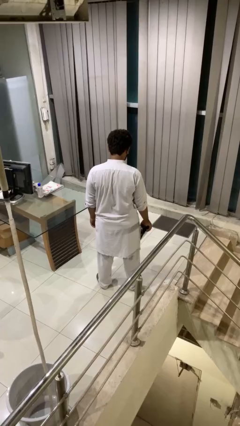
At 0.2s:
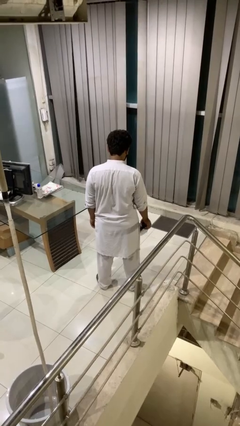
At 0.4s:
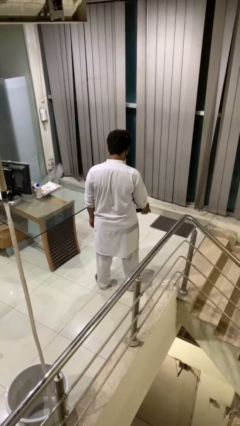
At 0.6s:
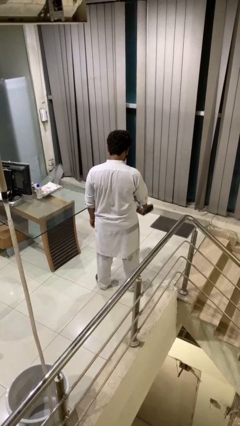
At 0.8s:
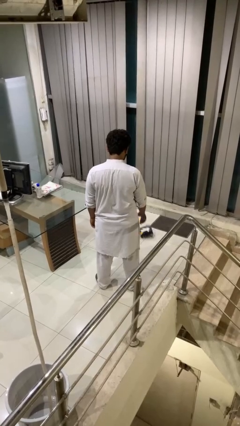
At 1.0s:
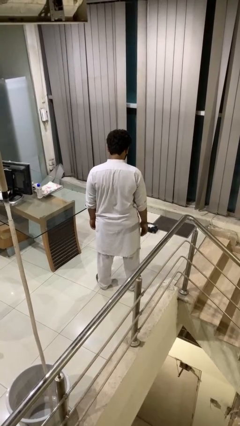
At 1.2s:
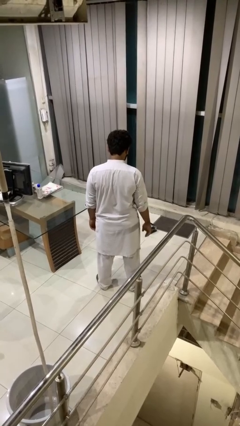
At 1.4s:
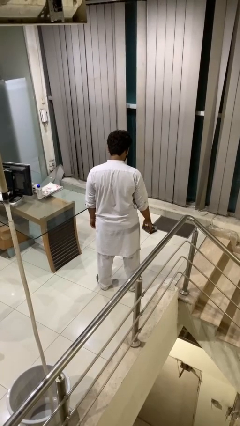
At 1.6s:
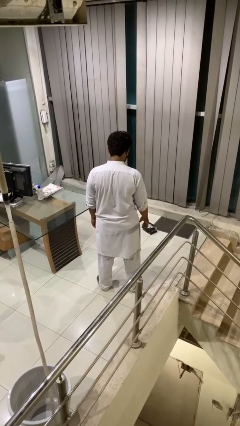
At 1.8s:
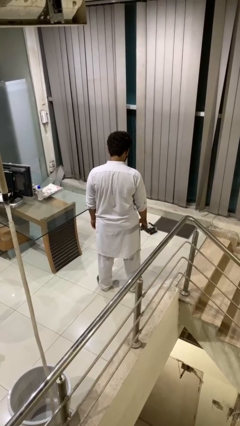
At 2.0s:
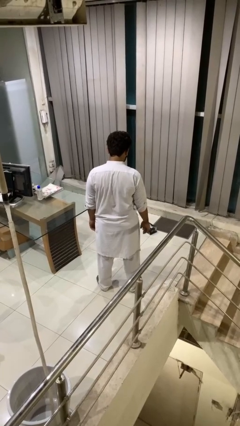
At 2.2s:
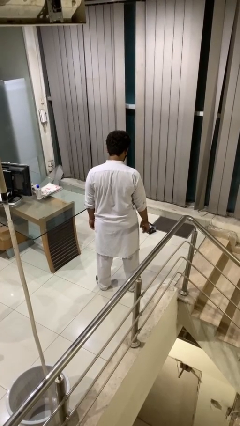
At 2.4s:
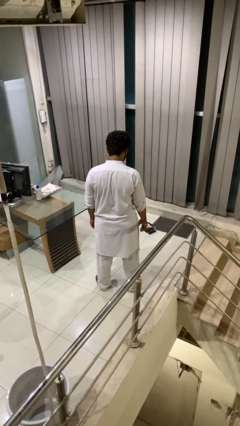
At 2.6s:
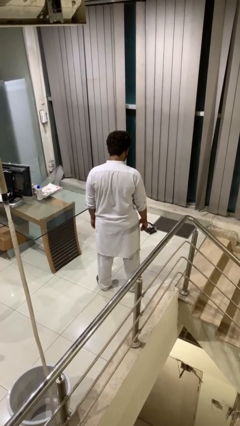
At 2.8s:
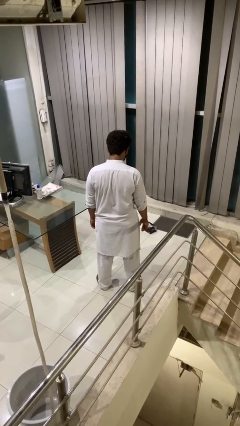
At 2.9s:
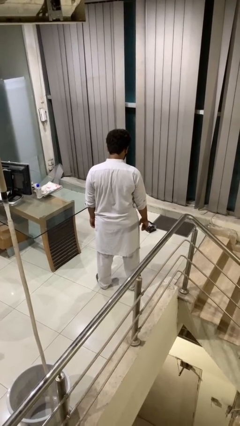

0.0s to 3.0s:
person throws object to ground

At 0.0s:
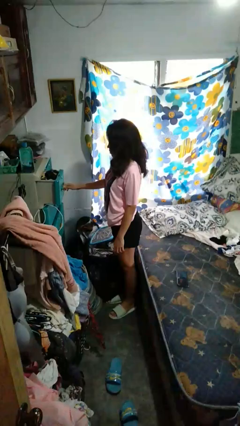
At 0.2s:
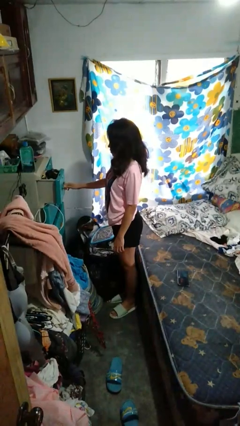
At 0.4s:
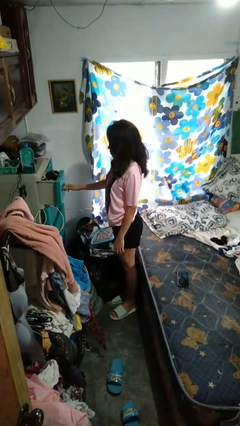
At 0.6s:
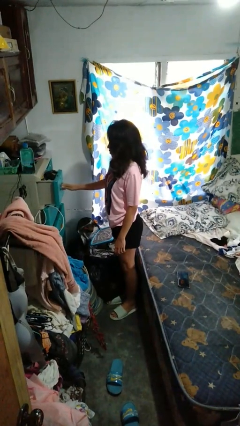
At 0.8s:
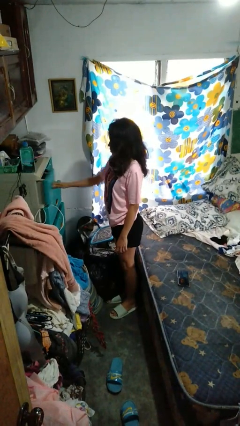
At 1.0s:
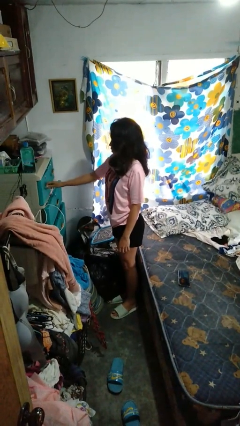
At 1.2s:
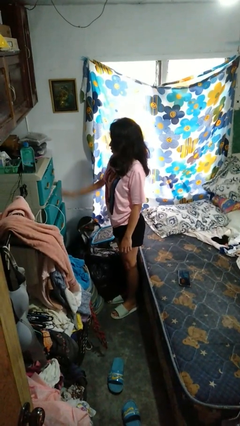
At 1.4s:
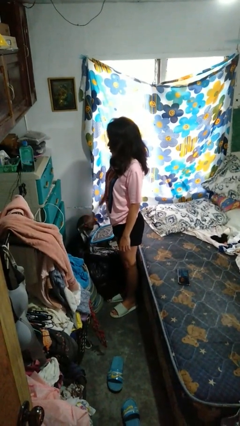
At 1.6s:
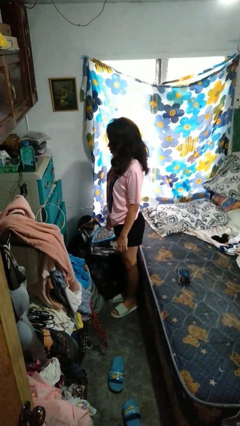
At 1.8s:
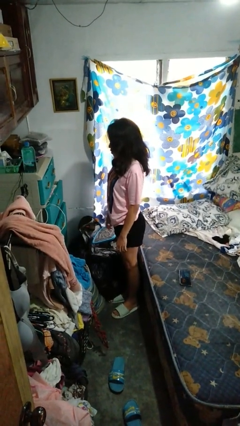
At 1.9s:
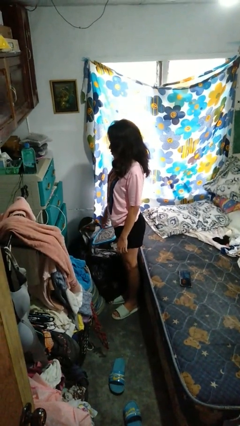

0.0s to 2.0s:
person closes dresser drawer

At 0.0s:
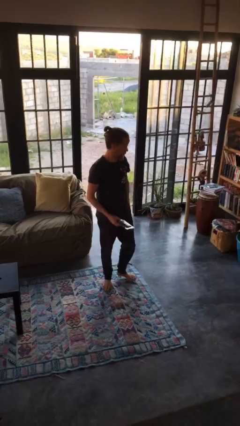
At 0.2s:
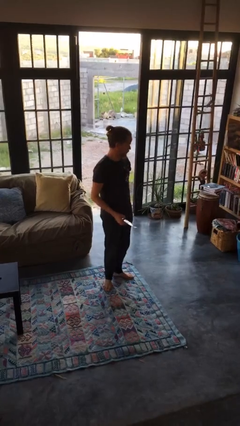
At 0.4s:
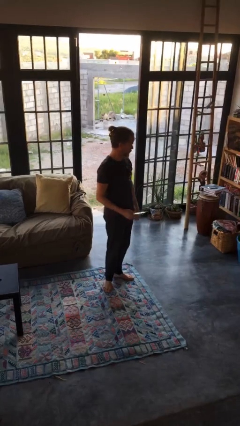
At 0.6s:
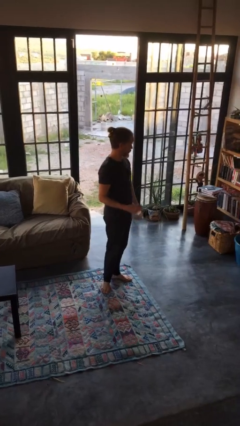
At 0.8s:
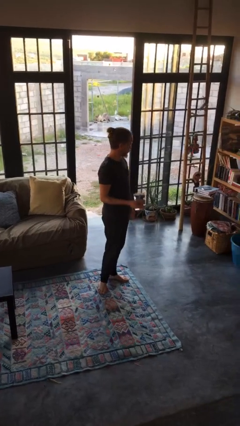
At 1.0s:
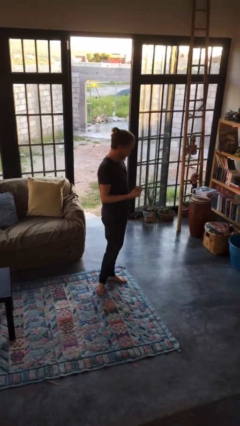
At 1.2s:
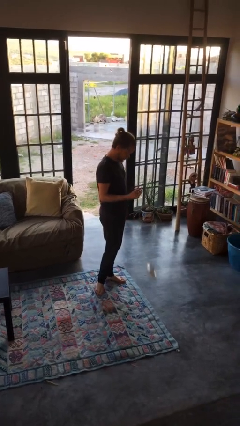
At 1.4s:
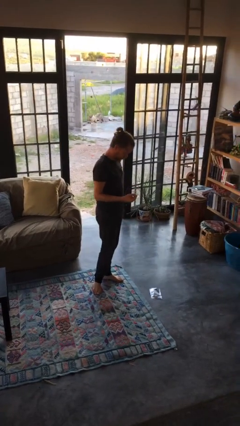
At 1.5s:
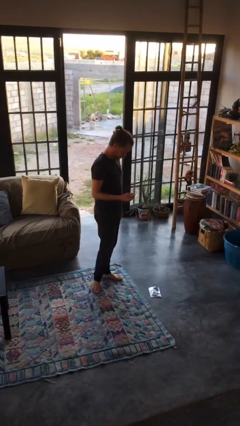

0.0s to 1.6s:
person drops object

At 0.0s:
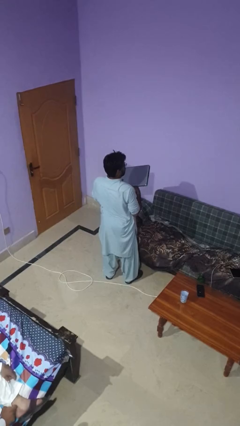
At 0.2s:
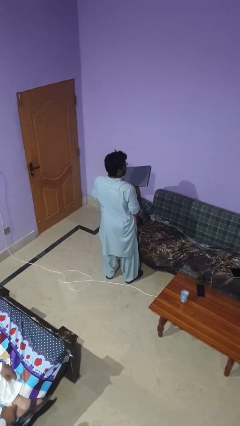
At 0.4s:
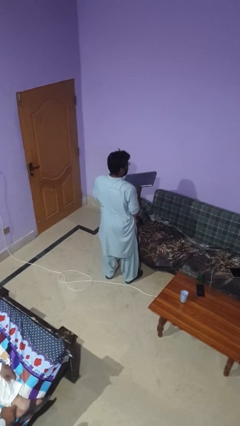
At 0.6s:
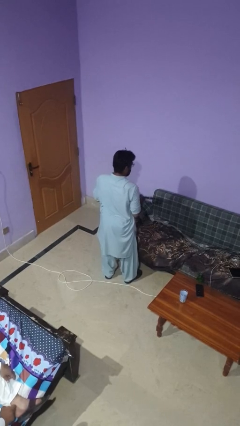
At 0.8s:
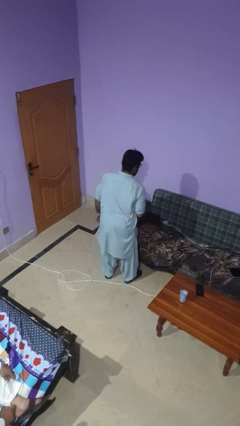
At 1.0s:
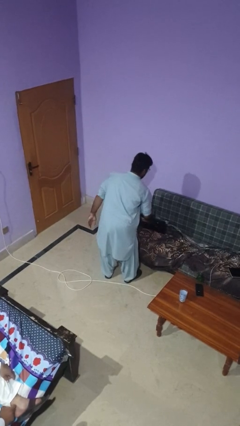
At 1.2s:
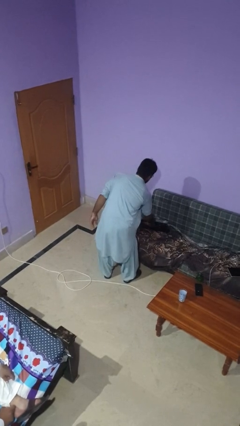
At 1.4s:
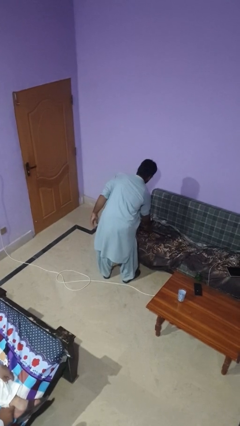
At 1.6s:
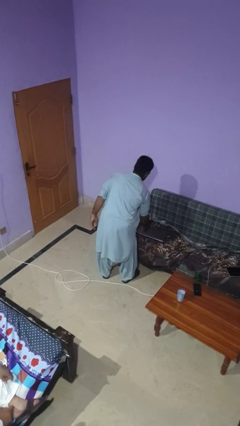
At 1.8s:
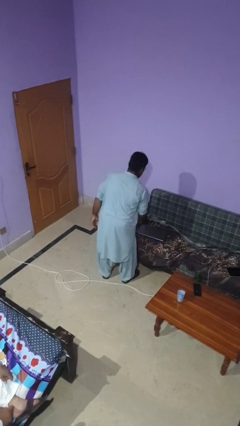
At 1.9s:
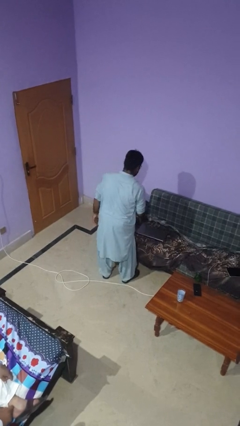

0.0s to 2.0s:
person puts down object on couch

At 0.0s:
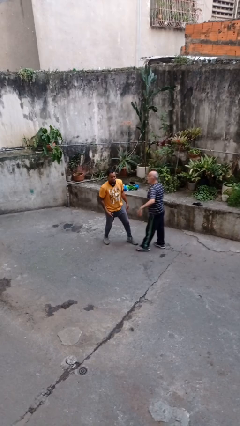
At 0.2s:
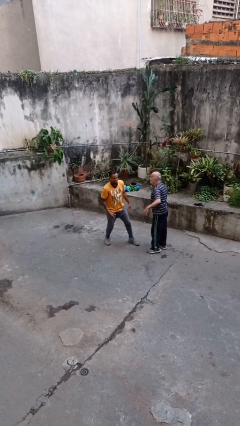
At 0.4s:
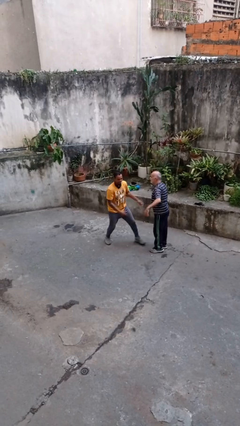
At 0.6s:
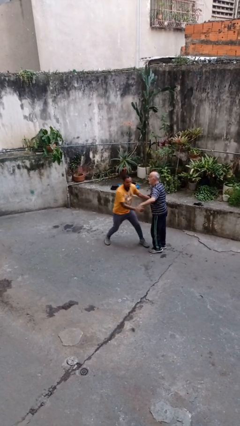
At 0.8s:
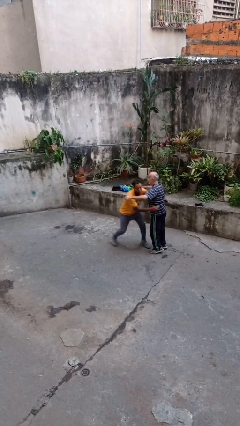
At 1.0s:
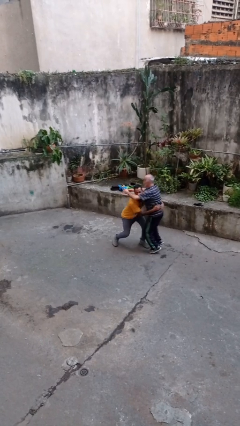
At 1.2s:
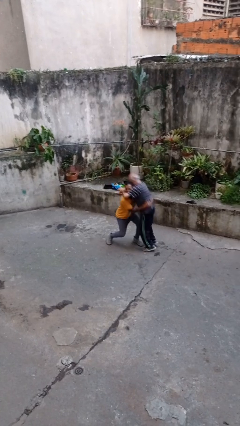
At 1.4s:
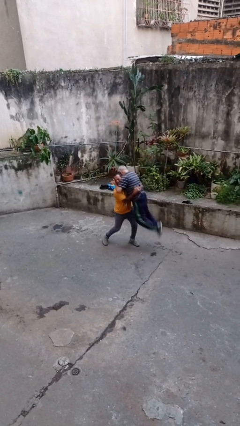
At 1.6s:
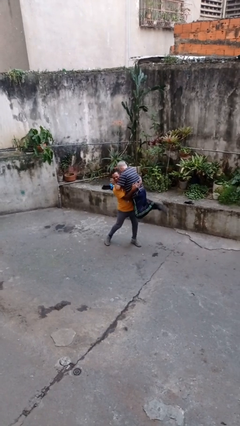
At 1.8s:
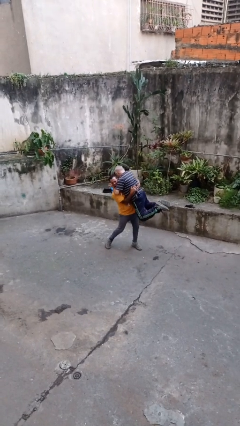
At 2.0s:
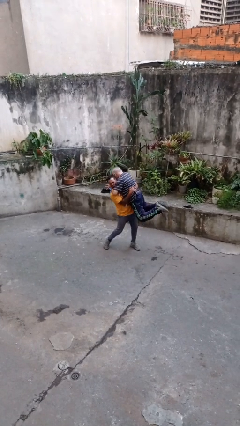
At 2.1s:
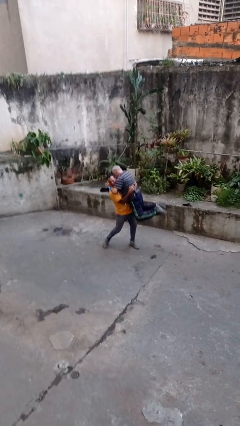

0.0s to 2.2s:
person picks up person

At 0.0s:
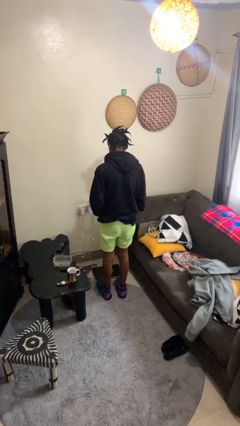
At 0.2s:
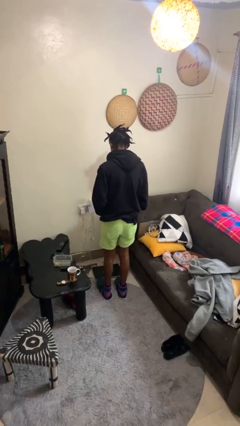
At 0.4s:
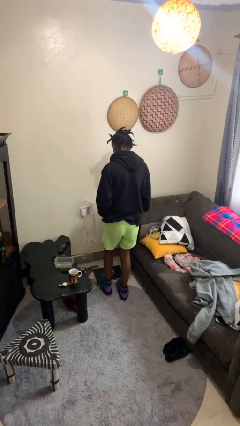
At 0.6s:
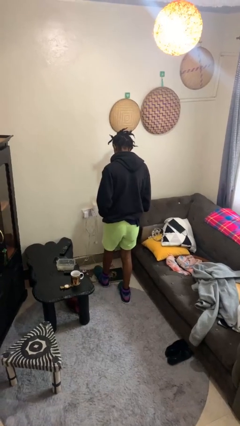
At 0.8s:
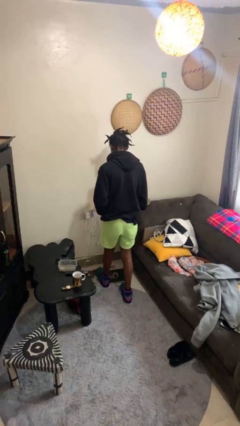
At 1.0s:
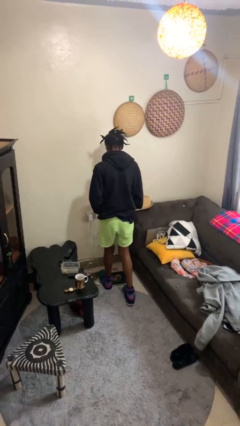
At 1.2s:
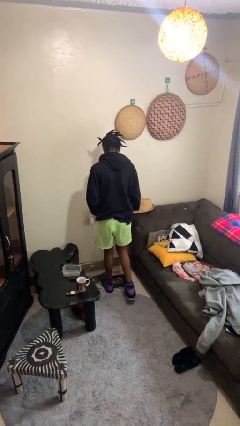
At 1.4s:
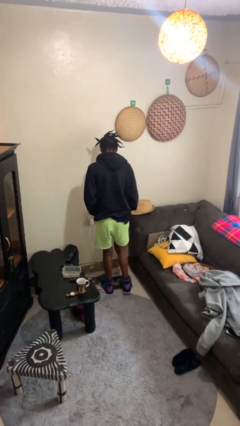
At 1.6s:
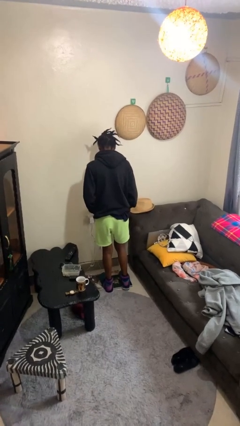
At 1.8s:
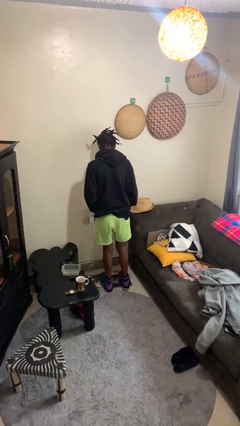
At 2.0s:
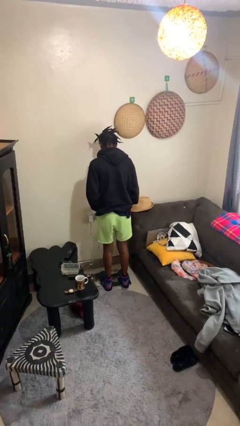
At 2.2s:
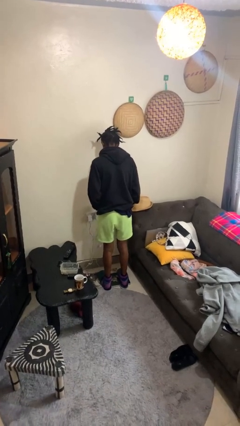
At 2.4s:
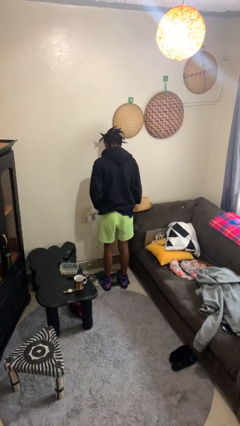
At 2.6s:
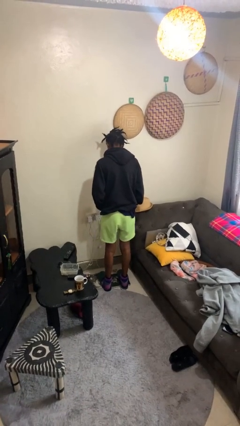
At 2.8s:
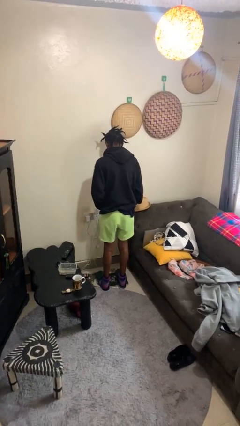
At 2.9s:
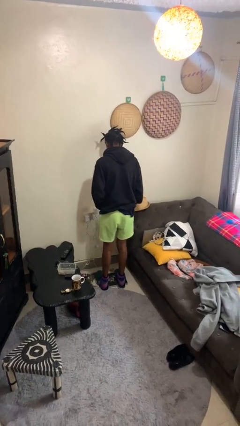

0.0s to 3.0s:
person uses bodyweight scale

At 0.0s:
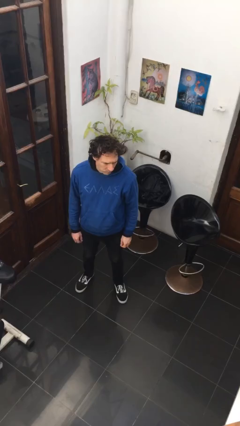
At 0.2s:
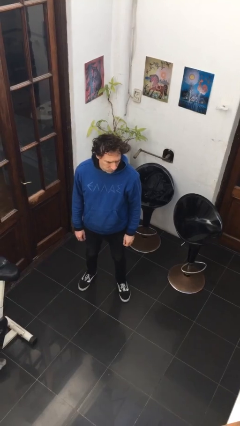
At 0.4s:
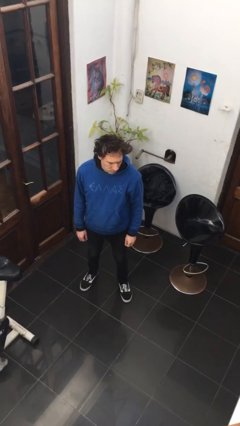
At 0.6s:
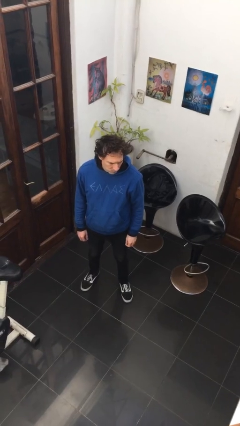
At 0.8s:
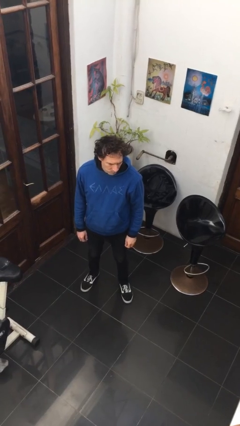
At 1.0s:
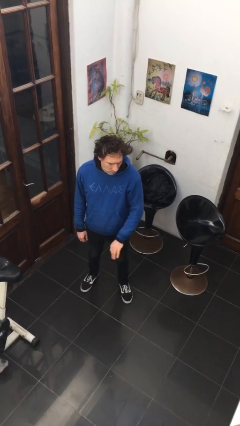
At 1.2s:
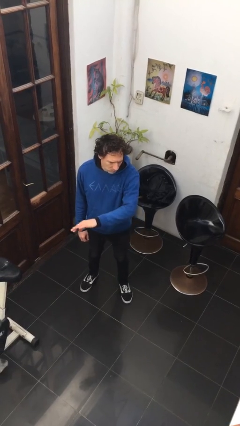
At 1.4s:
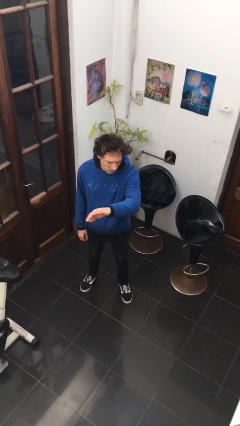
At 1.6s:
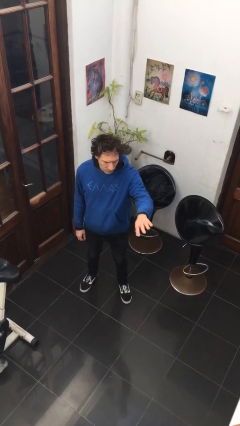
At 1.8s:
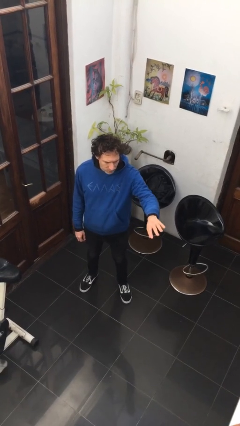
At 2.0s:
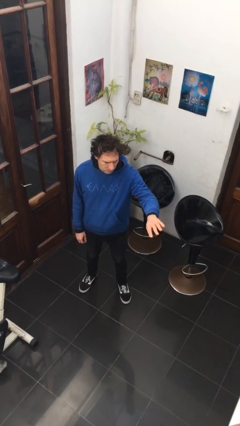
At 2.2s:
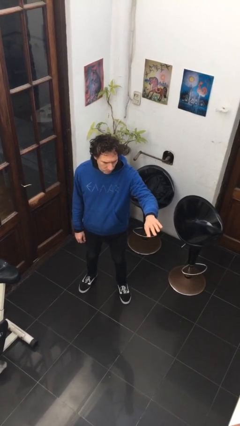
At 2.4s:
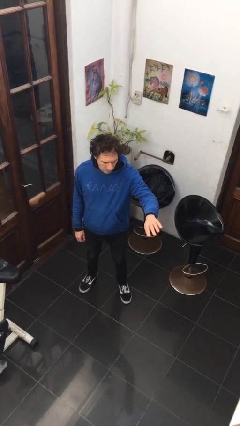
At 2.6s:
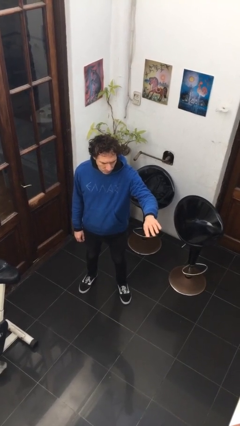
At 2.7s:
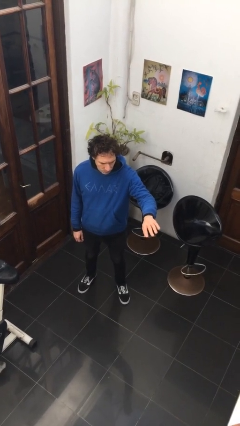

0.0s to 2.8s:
person gestures swipe left

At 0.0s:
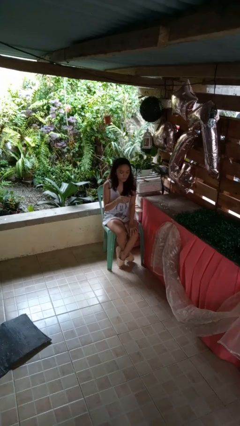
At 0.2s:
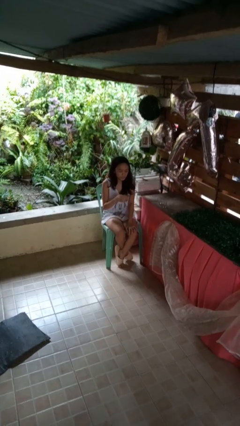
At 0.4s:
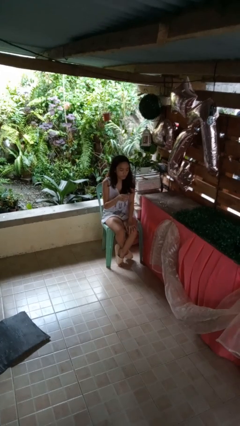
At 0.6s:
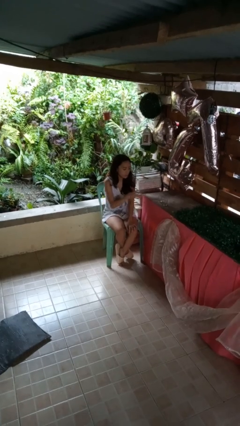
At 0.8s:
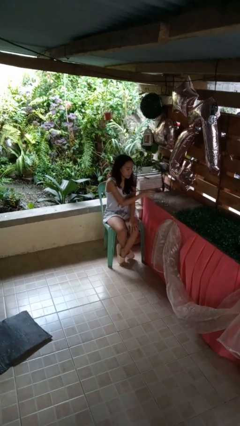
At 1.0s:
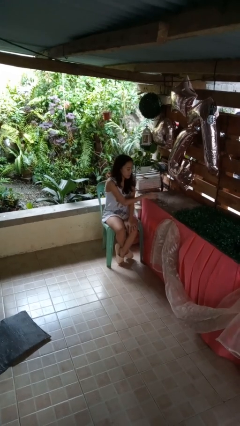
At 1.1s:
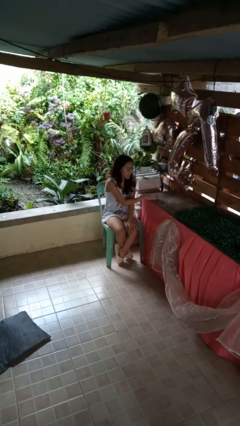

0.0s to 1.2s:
person puts down object on table
